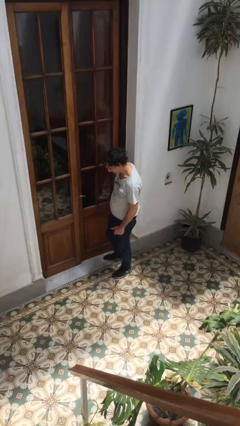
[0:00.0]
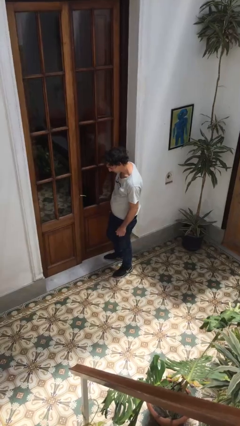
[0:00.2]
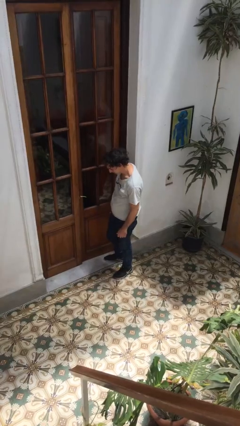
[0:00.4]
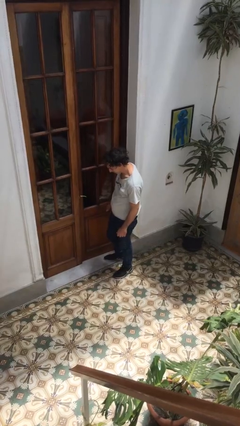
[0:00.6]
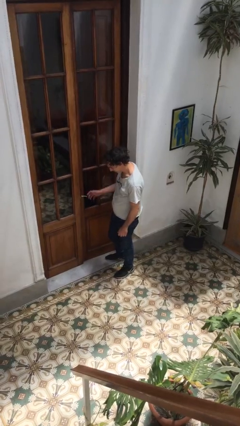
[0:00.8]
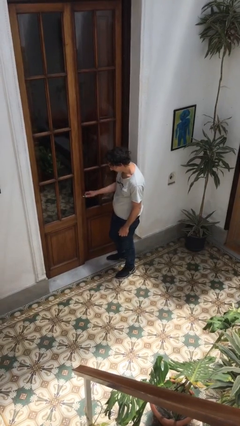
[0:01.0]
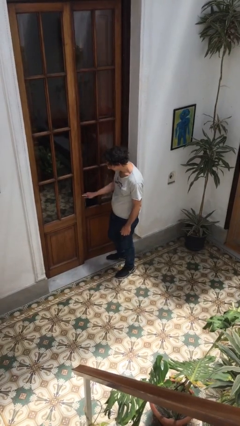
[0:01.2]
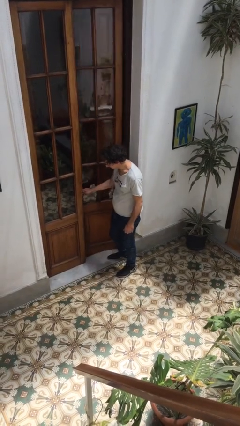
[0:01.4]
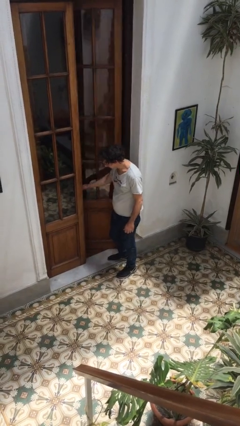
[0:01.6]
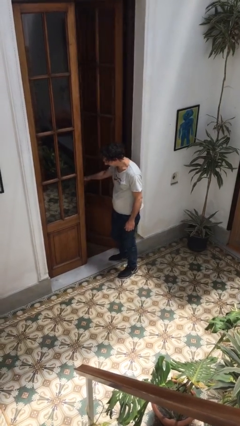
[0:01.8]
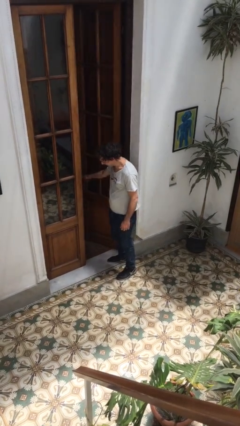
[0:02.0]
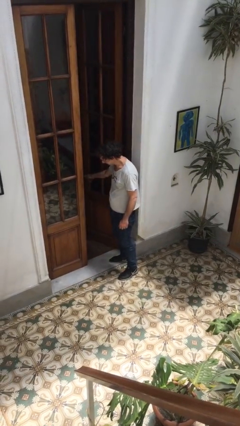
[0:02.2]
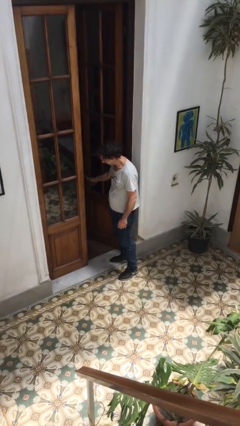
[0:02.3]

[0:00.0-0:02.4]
person opens facility door

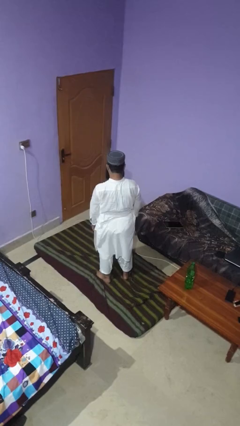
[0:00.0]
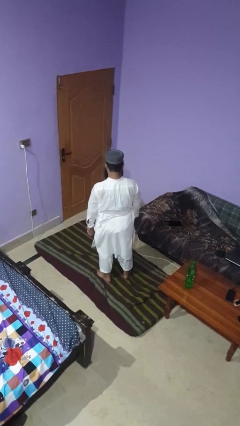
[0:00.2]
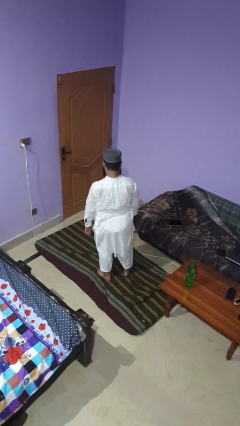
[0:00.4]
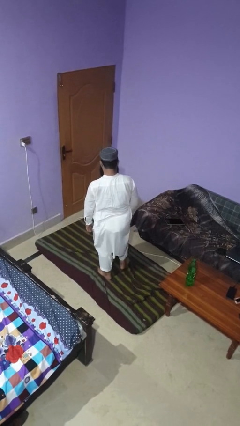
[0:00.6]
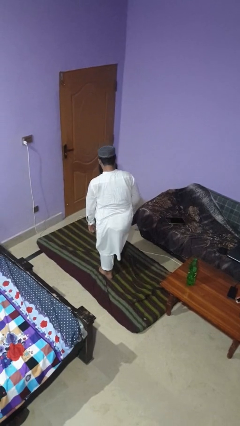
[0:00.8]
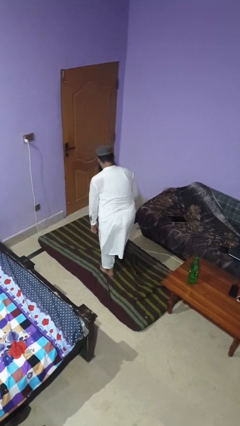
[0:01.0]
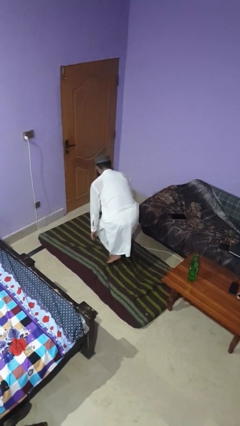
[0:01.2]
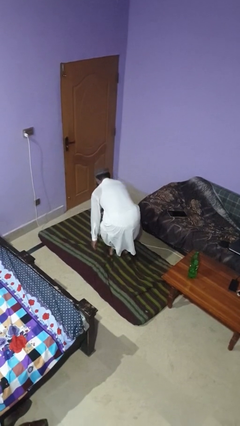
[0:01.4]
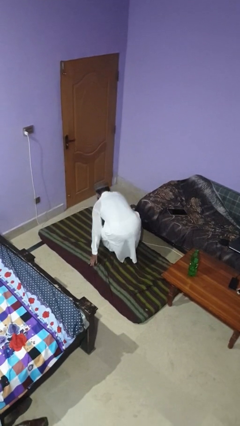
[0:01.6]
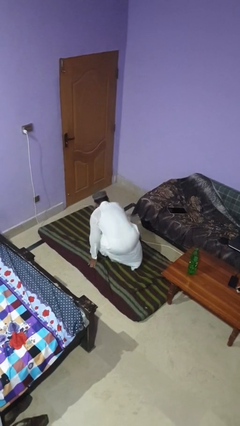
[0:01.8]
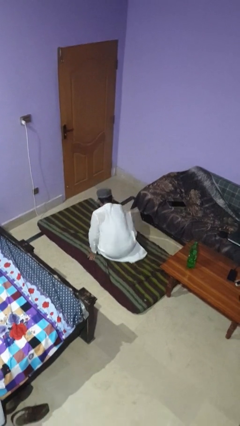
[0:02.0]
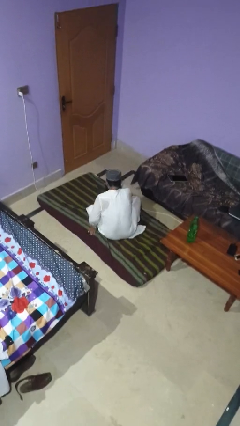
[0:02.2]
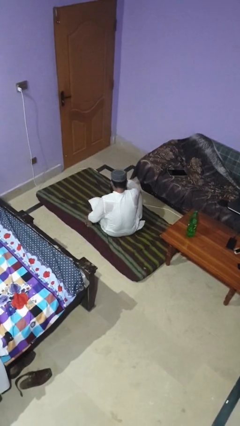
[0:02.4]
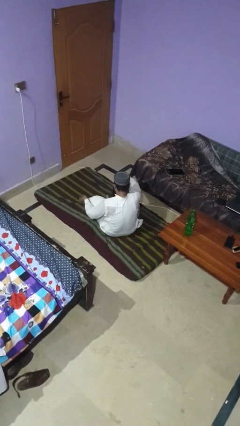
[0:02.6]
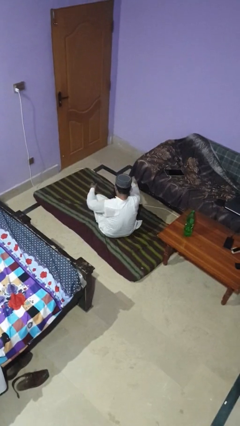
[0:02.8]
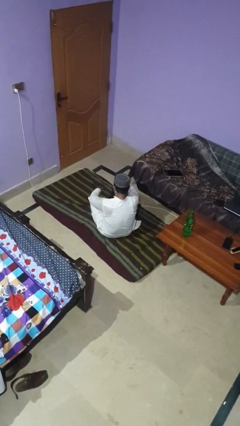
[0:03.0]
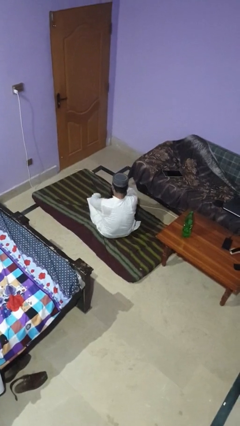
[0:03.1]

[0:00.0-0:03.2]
person sits crisscross

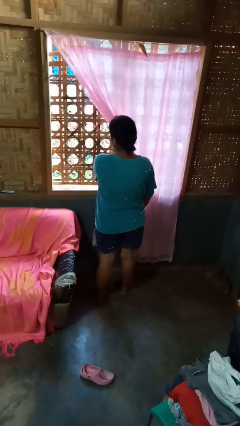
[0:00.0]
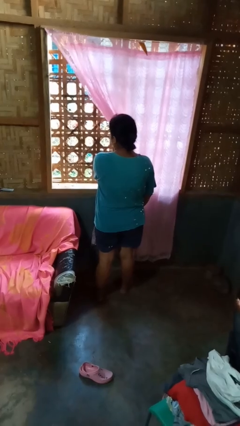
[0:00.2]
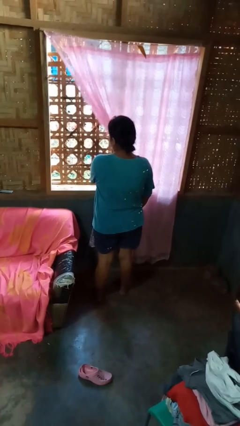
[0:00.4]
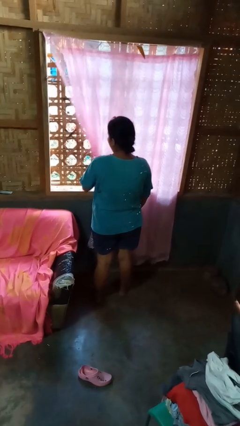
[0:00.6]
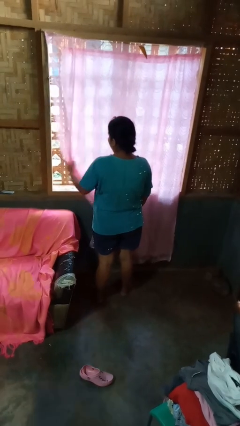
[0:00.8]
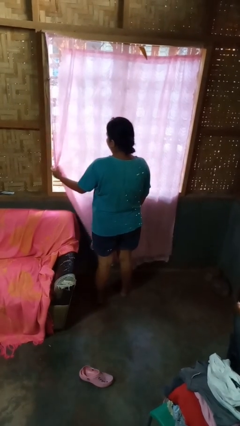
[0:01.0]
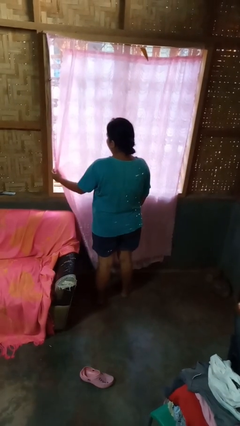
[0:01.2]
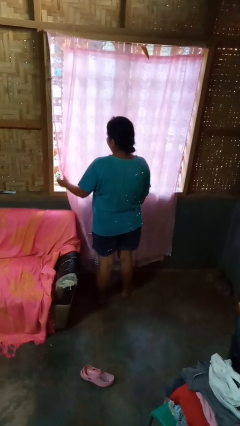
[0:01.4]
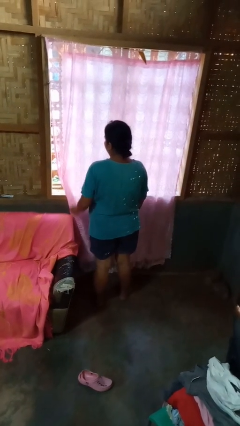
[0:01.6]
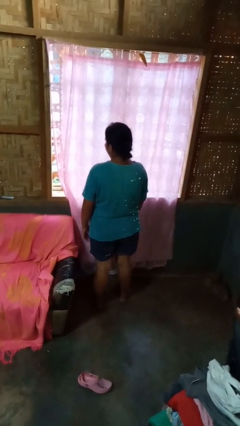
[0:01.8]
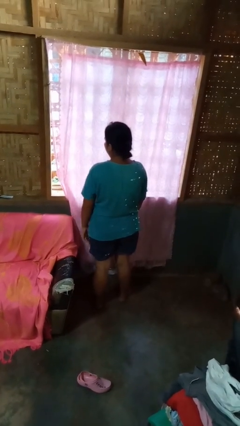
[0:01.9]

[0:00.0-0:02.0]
person closes curtains

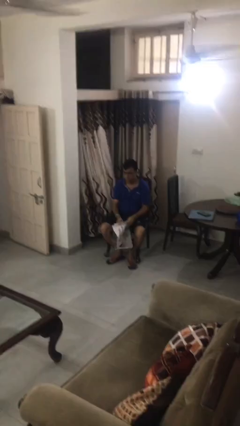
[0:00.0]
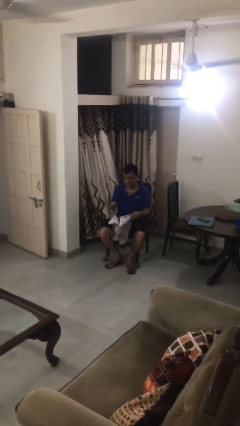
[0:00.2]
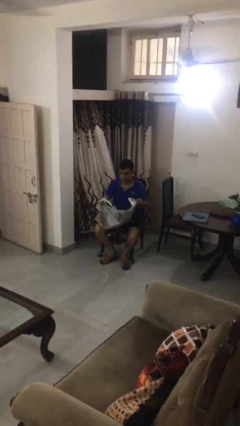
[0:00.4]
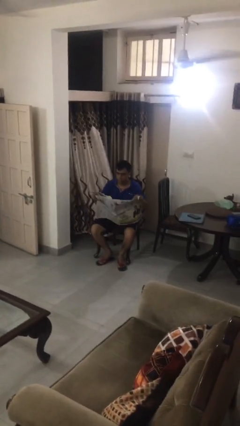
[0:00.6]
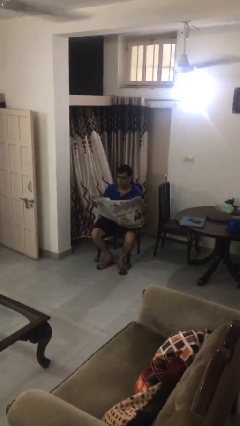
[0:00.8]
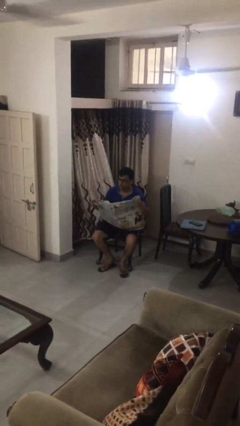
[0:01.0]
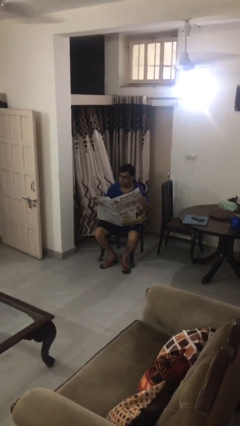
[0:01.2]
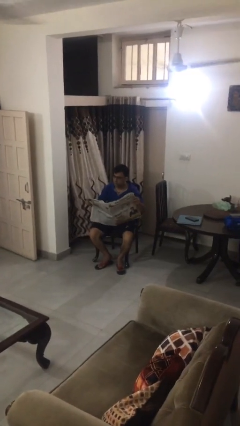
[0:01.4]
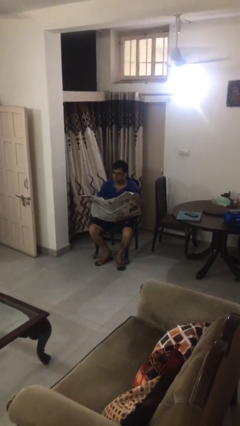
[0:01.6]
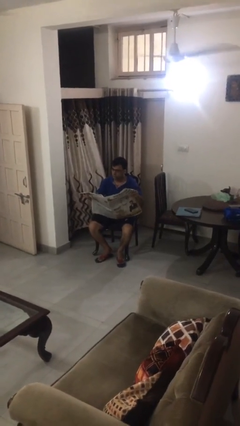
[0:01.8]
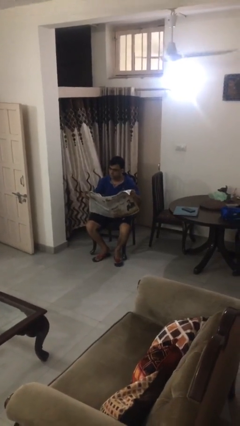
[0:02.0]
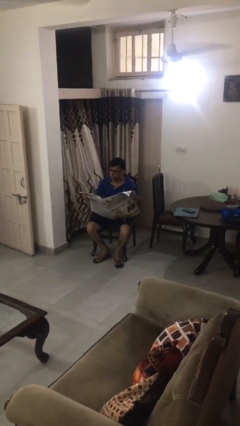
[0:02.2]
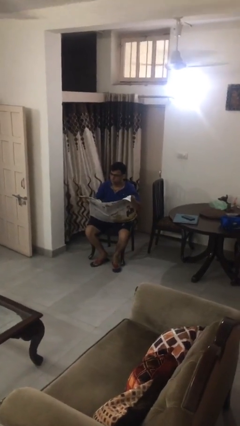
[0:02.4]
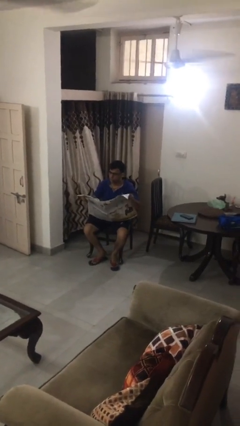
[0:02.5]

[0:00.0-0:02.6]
person reads newspaper

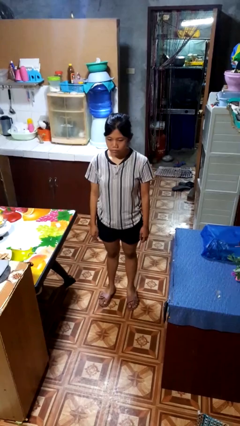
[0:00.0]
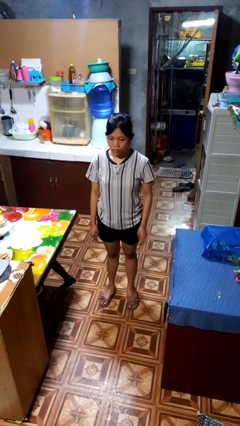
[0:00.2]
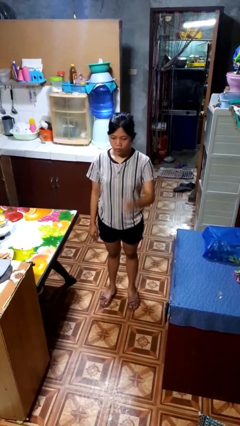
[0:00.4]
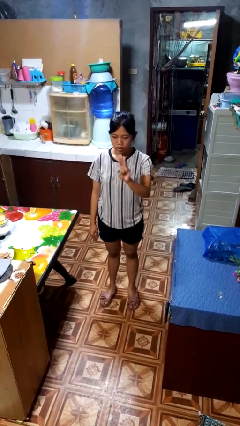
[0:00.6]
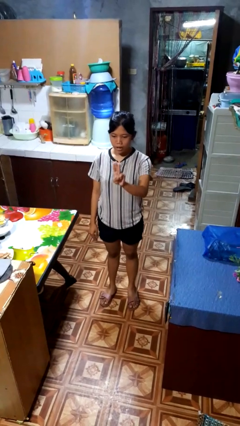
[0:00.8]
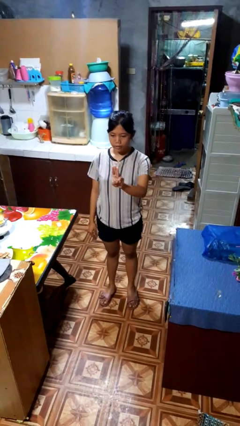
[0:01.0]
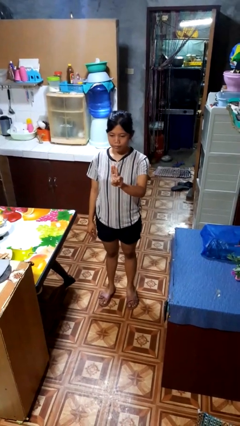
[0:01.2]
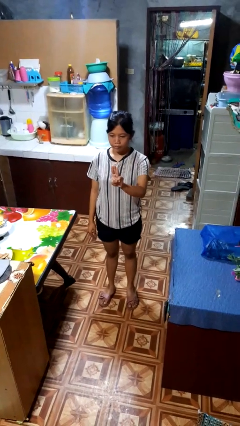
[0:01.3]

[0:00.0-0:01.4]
person gestures number three

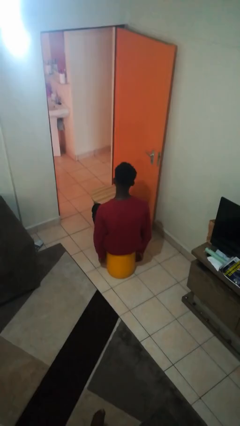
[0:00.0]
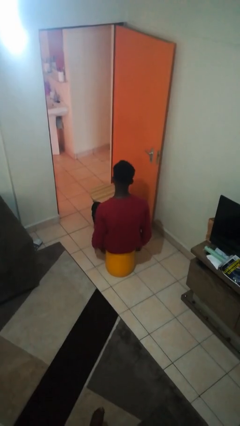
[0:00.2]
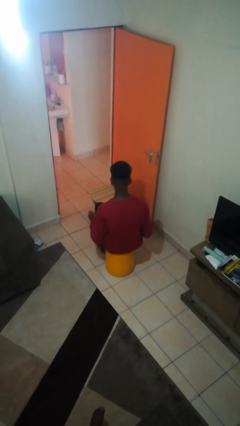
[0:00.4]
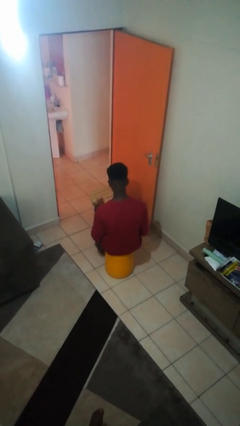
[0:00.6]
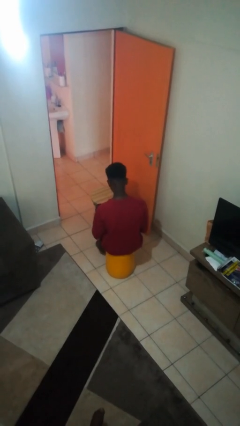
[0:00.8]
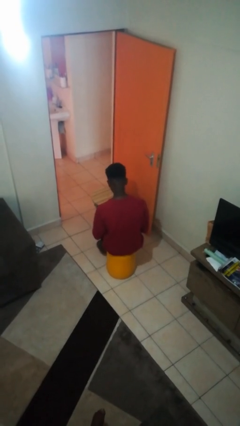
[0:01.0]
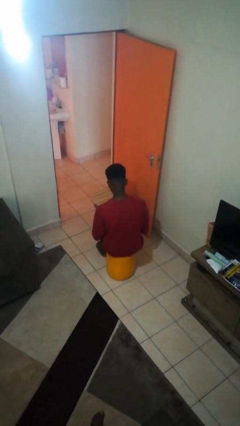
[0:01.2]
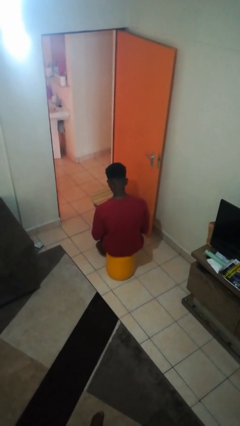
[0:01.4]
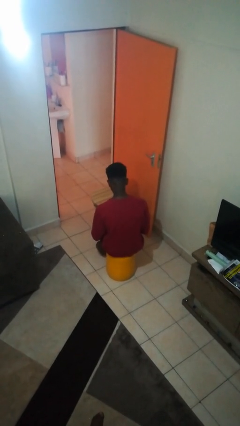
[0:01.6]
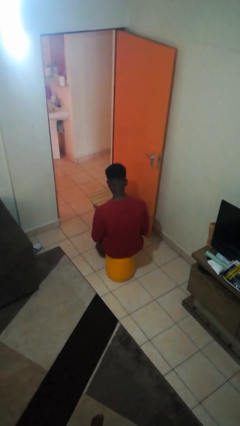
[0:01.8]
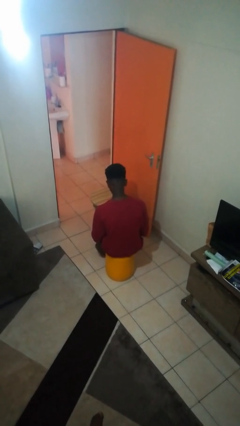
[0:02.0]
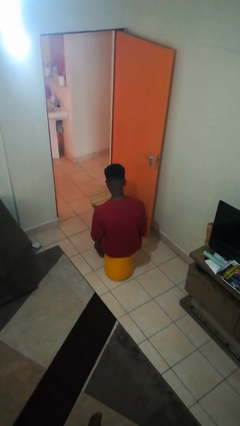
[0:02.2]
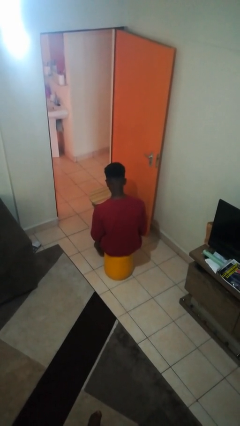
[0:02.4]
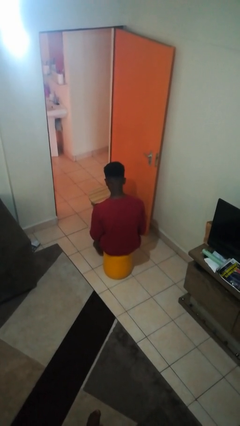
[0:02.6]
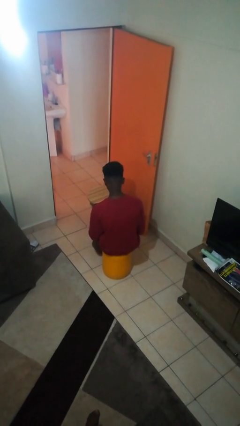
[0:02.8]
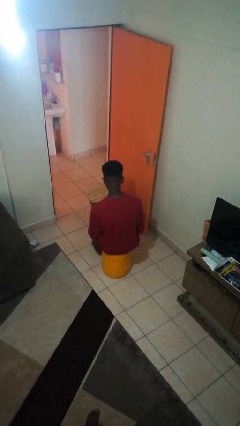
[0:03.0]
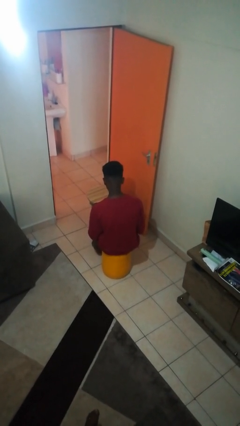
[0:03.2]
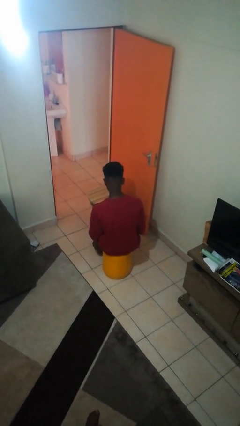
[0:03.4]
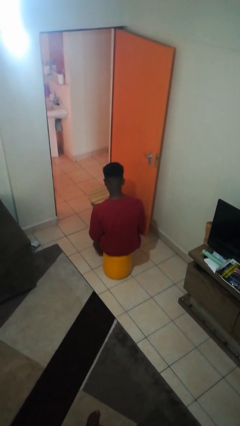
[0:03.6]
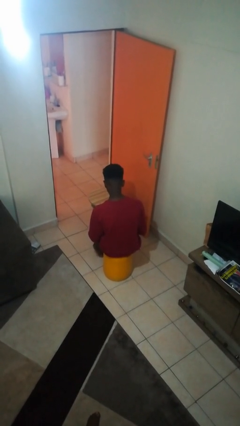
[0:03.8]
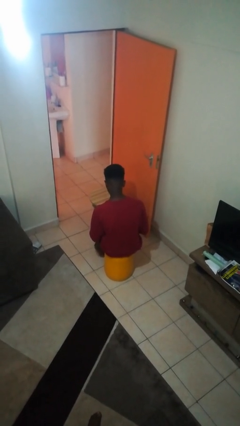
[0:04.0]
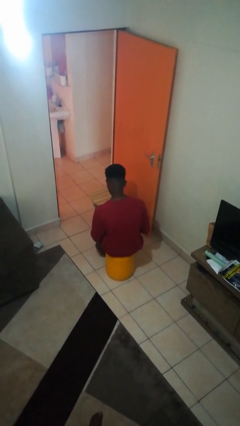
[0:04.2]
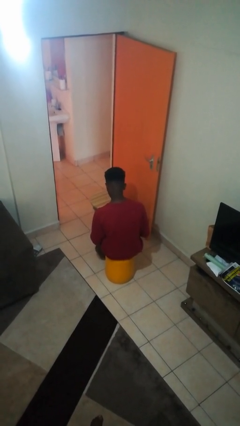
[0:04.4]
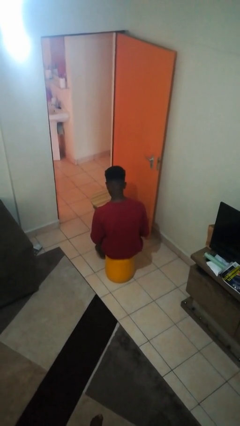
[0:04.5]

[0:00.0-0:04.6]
person looks at hands in lap

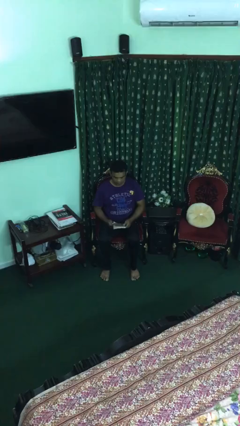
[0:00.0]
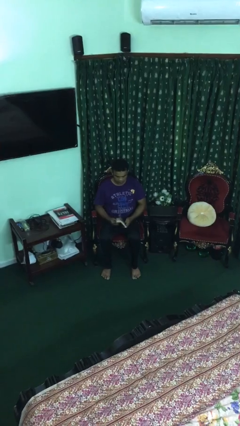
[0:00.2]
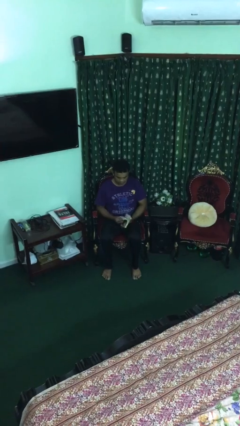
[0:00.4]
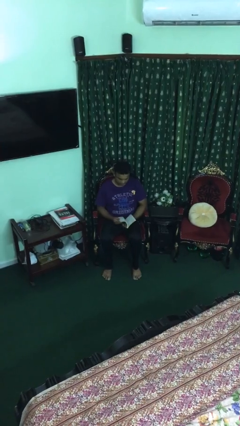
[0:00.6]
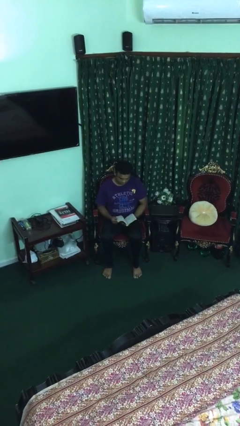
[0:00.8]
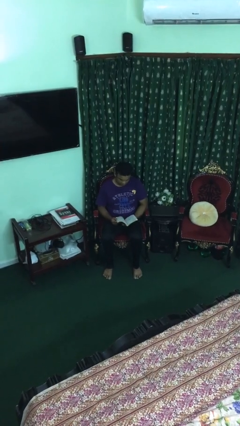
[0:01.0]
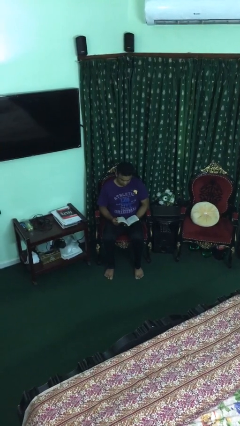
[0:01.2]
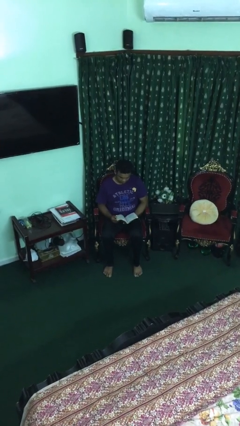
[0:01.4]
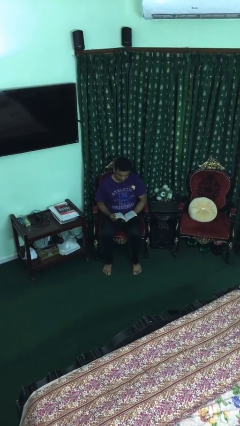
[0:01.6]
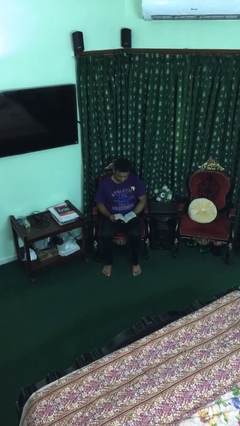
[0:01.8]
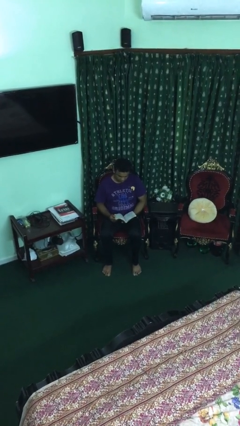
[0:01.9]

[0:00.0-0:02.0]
person reads document
